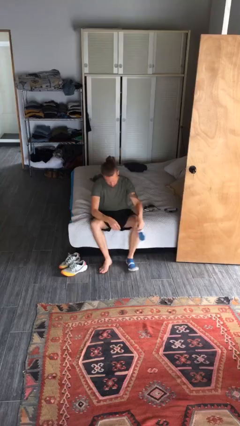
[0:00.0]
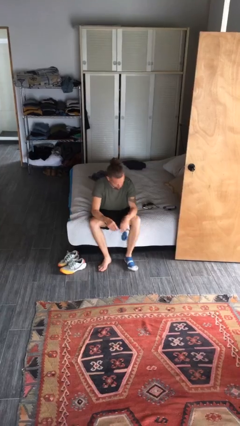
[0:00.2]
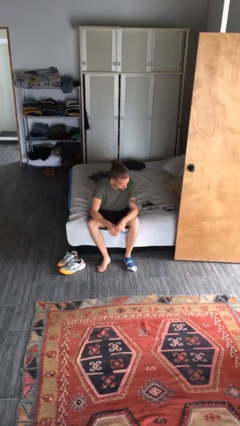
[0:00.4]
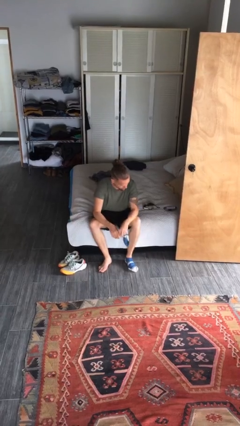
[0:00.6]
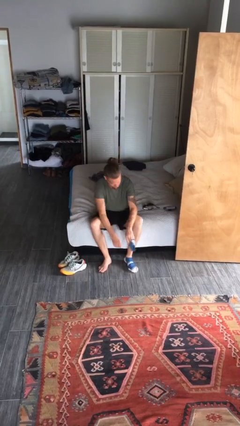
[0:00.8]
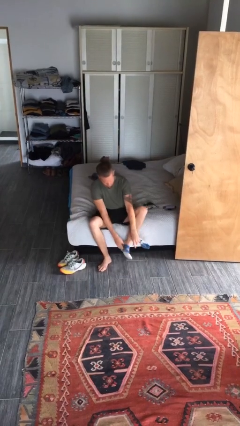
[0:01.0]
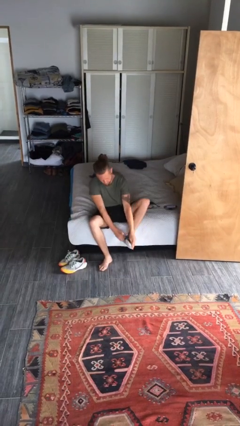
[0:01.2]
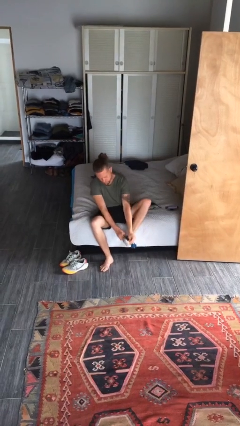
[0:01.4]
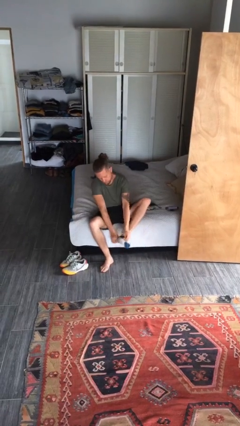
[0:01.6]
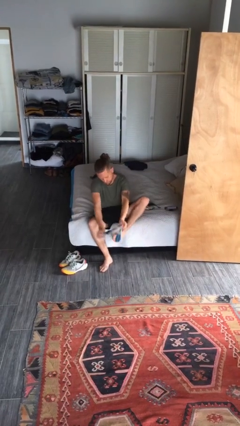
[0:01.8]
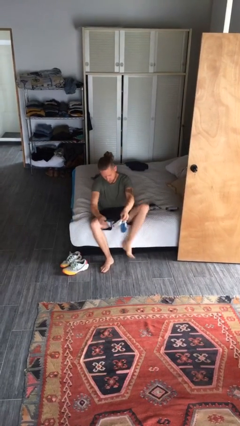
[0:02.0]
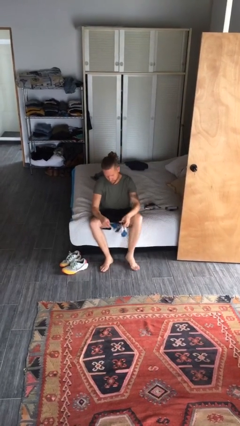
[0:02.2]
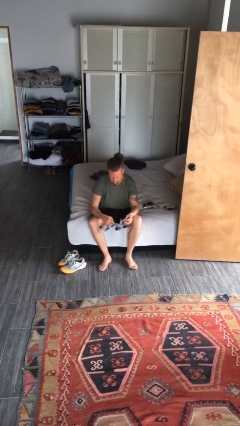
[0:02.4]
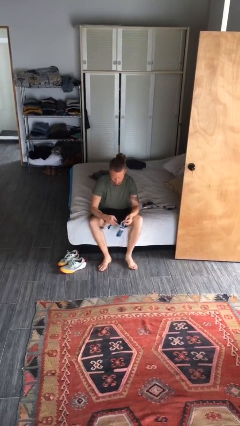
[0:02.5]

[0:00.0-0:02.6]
person takes off socks

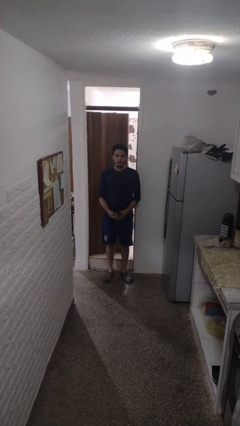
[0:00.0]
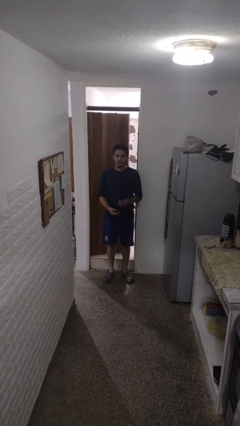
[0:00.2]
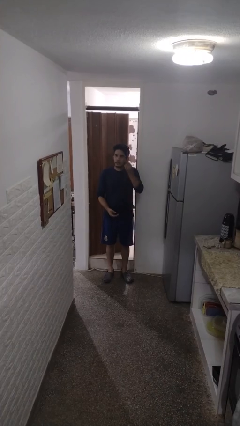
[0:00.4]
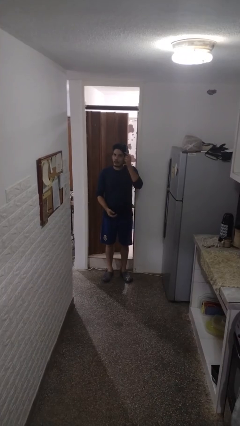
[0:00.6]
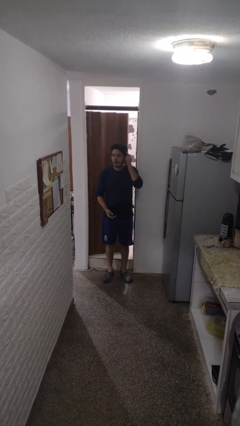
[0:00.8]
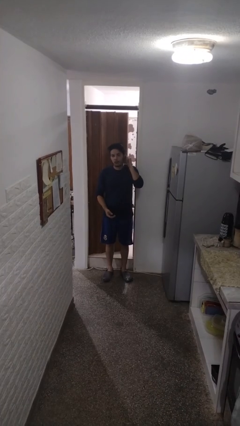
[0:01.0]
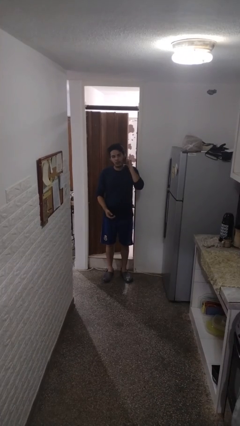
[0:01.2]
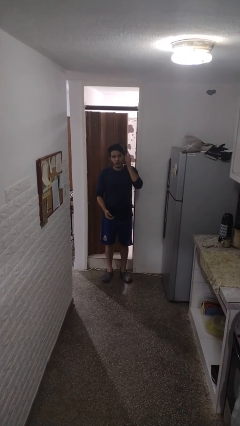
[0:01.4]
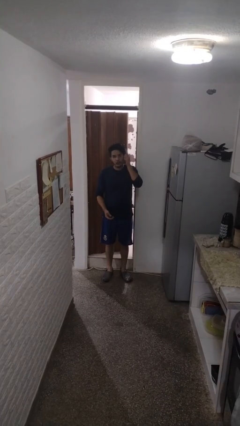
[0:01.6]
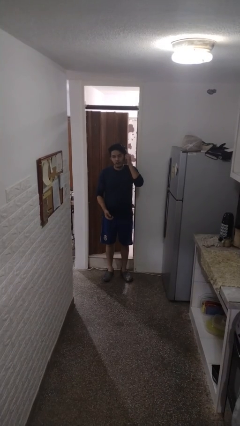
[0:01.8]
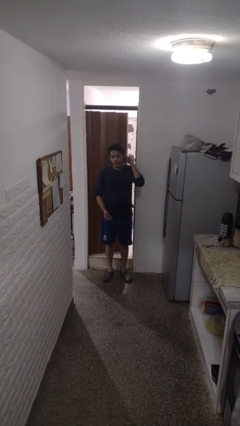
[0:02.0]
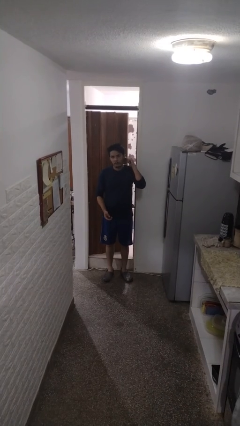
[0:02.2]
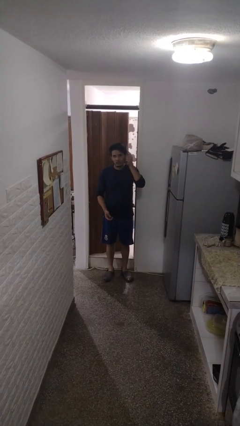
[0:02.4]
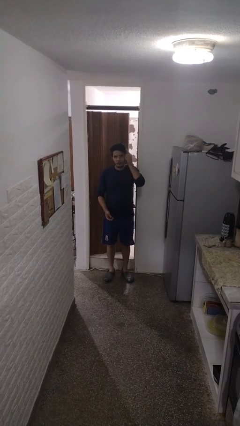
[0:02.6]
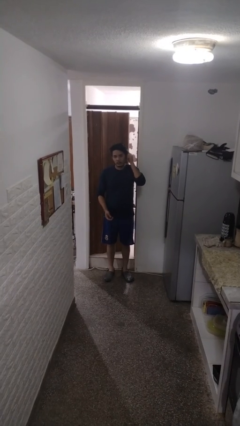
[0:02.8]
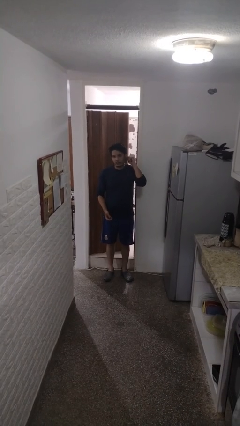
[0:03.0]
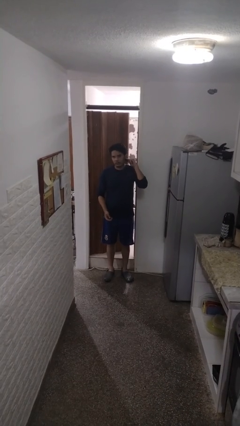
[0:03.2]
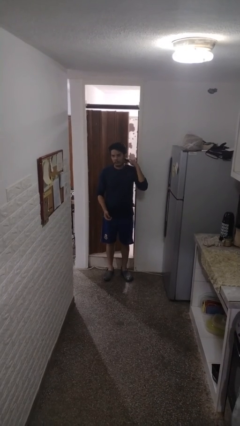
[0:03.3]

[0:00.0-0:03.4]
person brushes hair

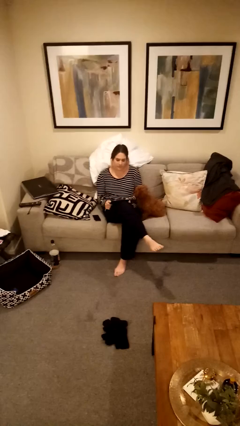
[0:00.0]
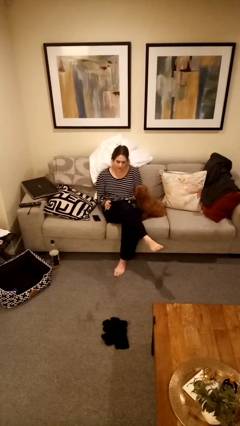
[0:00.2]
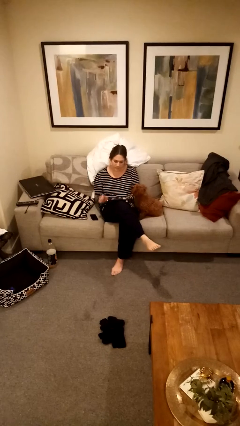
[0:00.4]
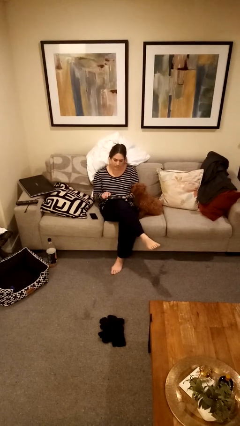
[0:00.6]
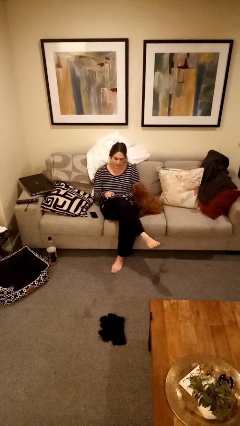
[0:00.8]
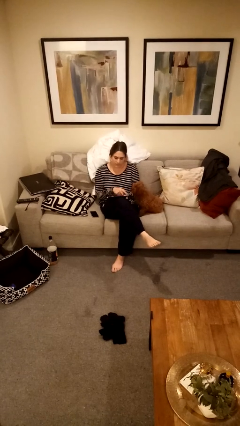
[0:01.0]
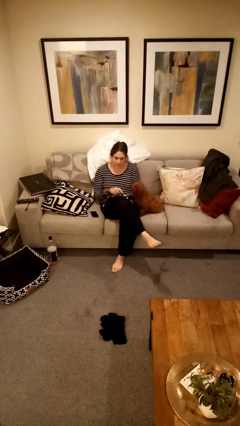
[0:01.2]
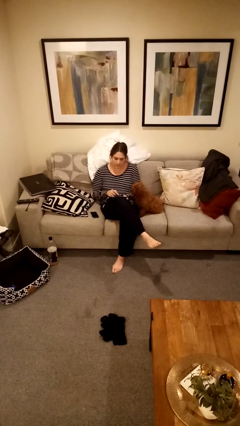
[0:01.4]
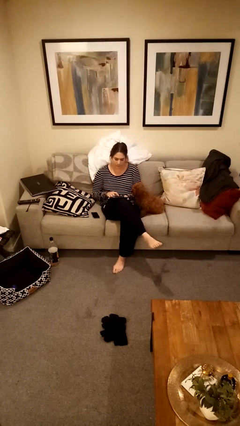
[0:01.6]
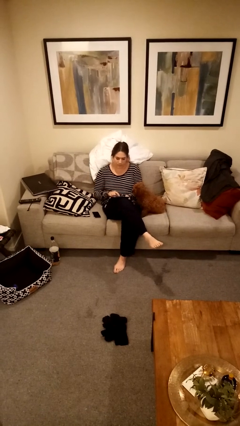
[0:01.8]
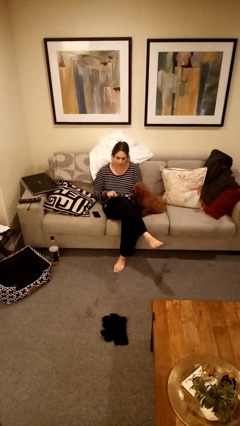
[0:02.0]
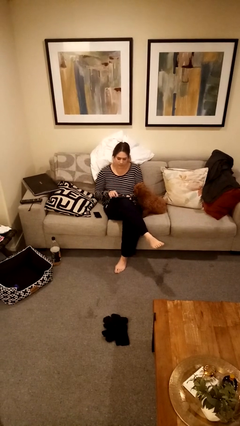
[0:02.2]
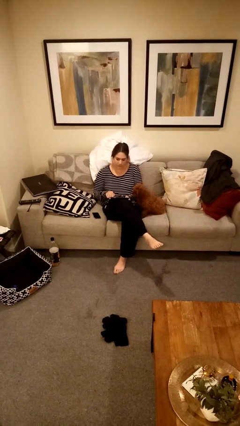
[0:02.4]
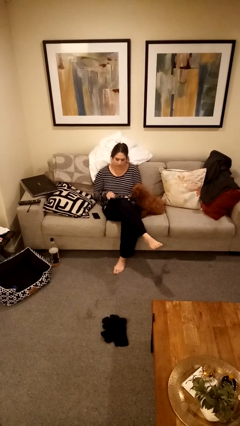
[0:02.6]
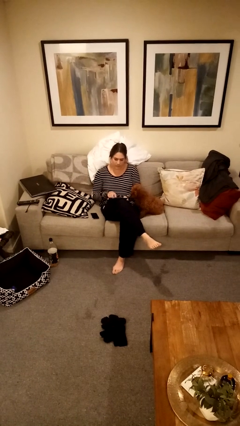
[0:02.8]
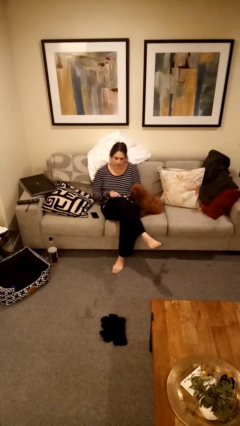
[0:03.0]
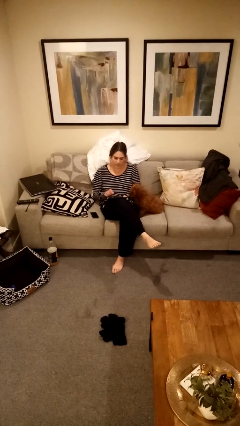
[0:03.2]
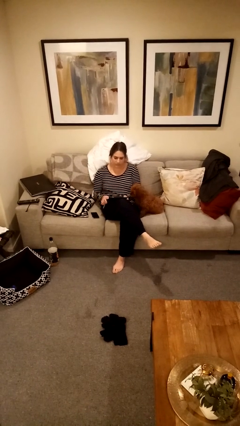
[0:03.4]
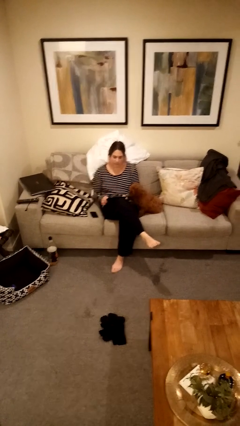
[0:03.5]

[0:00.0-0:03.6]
person interacts with tablet

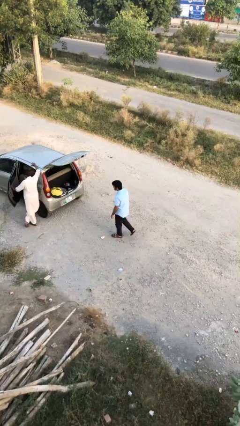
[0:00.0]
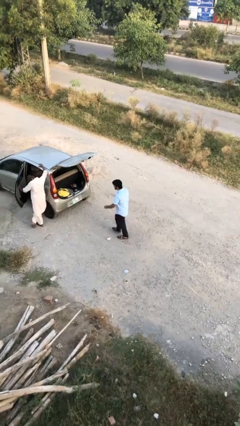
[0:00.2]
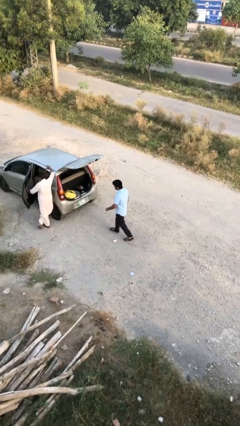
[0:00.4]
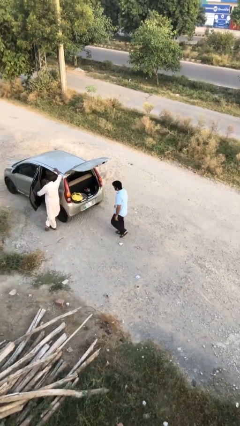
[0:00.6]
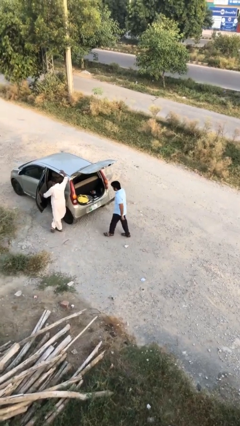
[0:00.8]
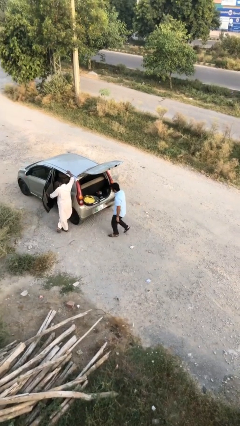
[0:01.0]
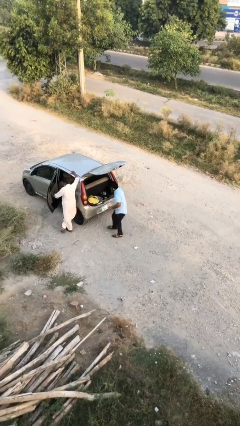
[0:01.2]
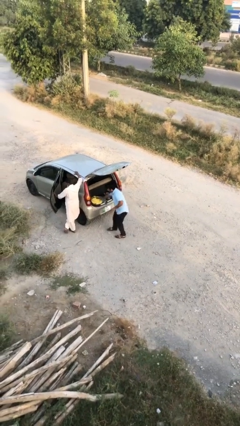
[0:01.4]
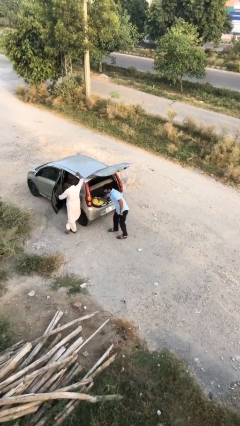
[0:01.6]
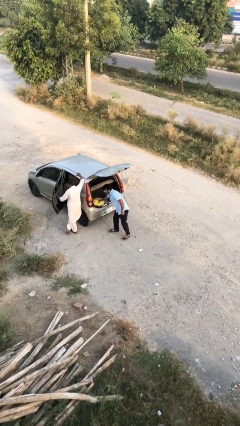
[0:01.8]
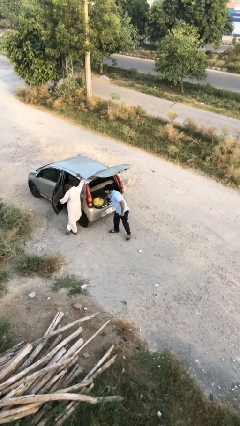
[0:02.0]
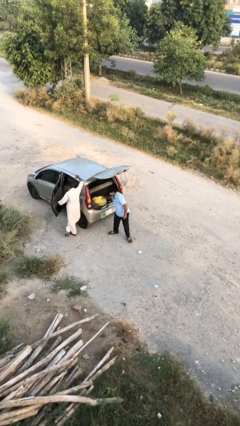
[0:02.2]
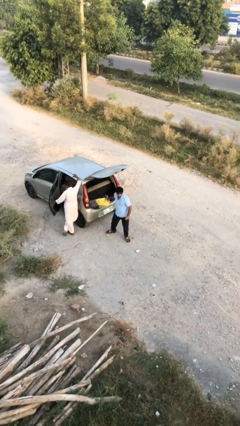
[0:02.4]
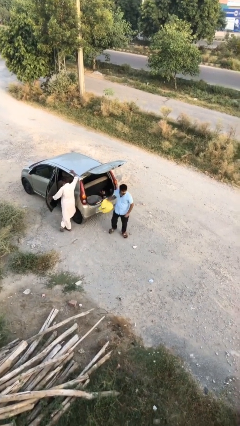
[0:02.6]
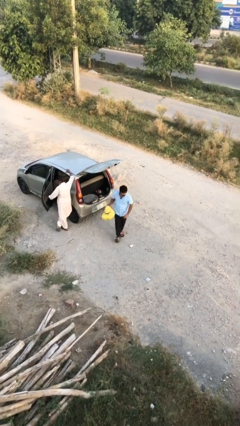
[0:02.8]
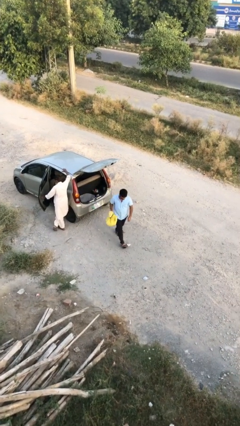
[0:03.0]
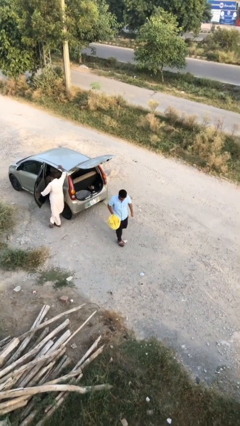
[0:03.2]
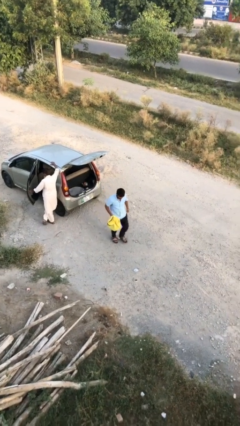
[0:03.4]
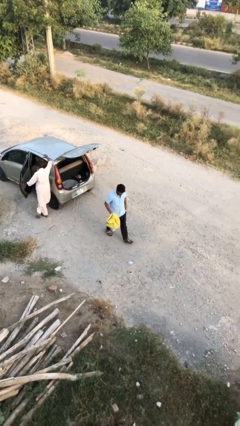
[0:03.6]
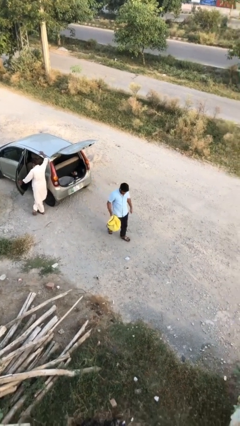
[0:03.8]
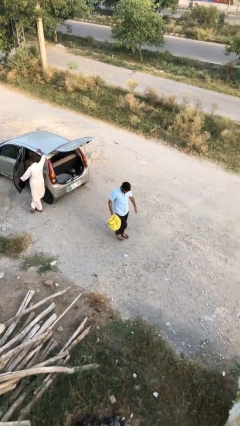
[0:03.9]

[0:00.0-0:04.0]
person steals object from person

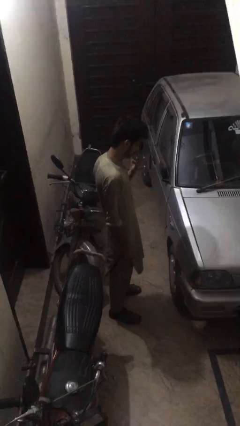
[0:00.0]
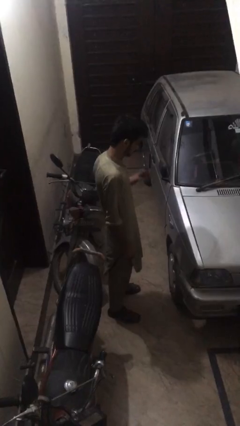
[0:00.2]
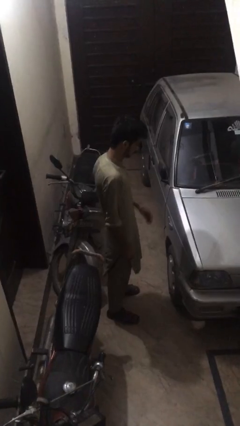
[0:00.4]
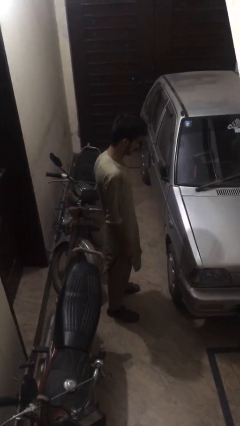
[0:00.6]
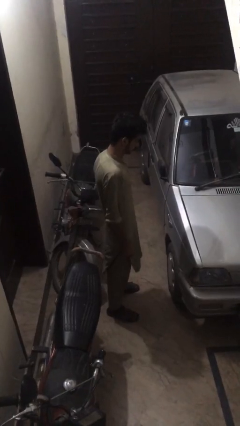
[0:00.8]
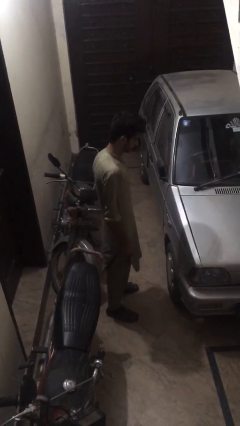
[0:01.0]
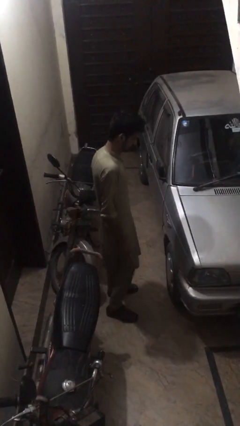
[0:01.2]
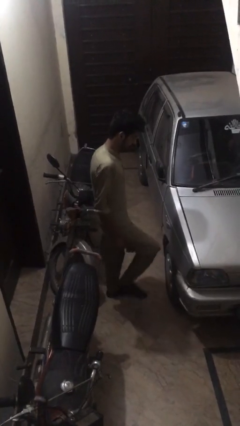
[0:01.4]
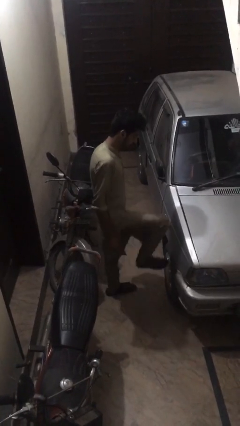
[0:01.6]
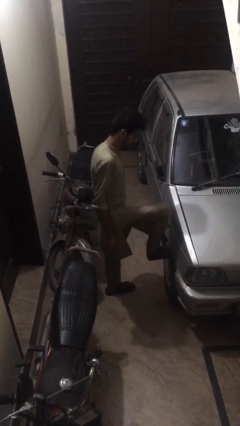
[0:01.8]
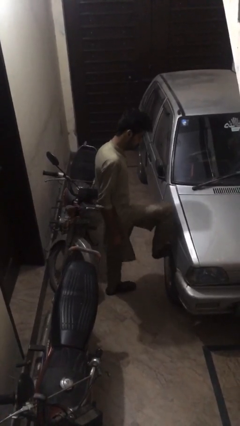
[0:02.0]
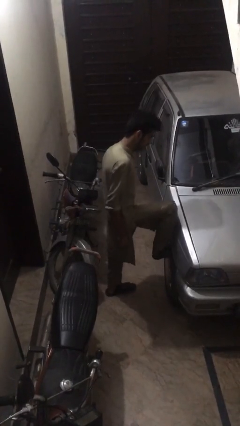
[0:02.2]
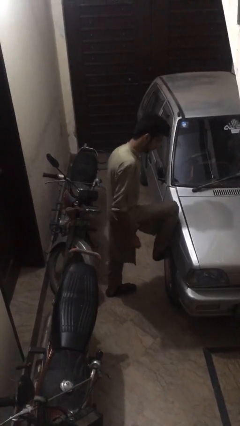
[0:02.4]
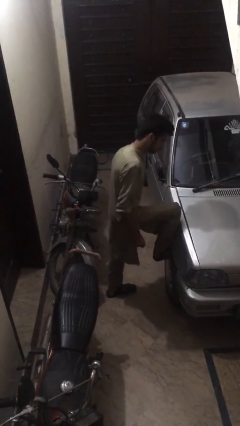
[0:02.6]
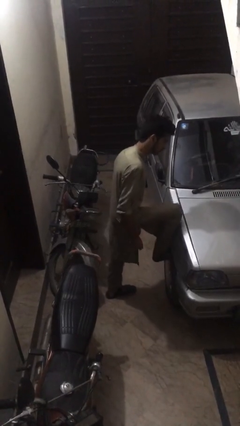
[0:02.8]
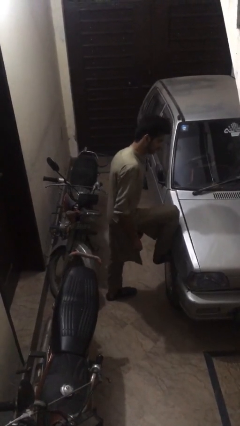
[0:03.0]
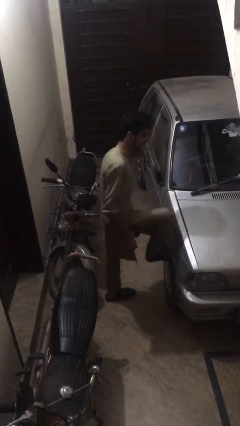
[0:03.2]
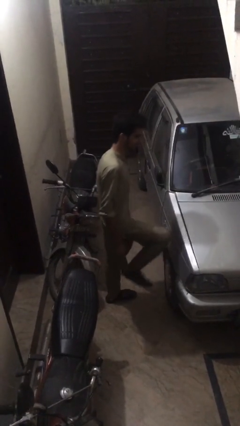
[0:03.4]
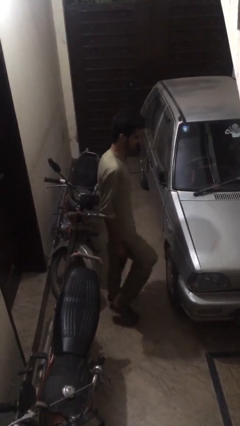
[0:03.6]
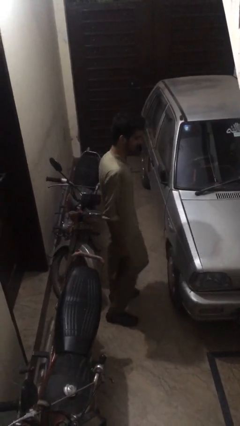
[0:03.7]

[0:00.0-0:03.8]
person kicks car tires
